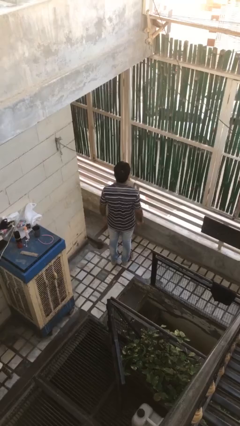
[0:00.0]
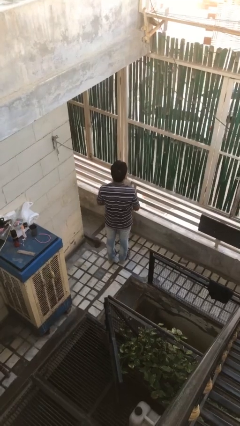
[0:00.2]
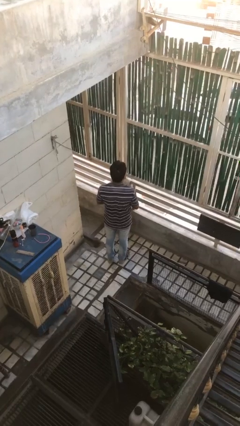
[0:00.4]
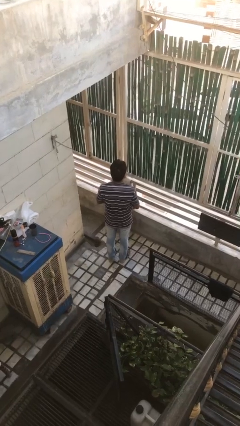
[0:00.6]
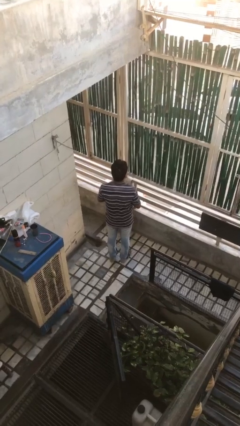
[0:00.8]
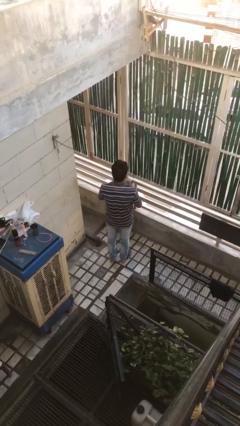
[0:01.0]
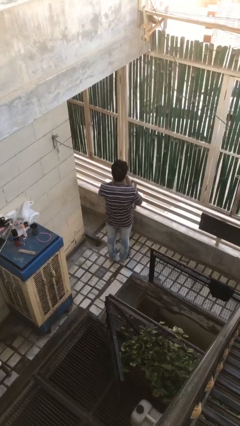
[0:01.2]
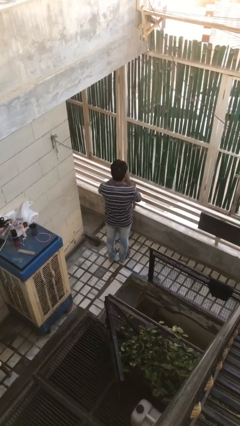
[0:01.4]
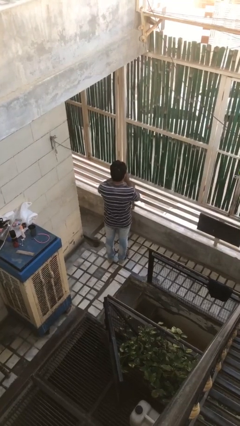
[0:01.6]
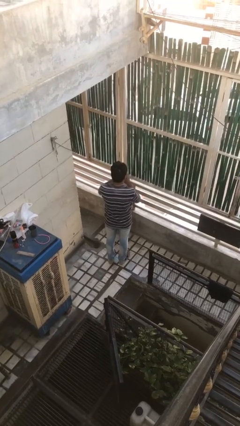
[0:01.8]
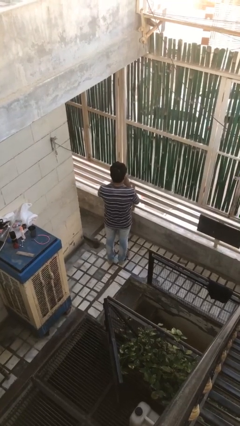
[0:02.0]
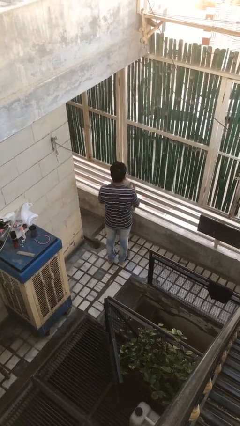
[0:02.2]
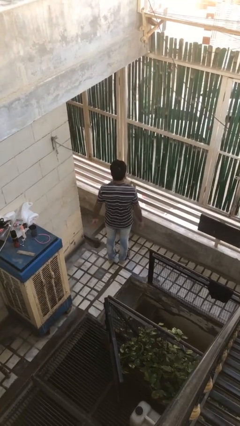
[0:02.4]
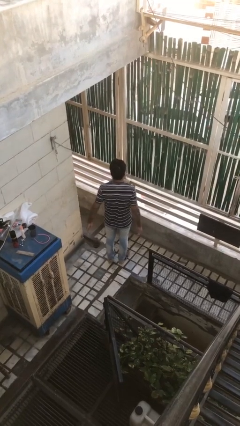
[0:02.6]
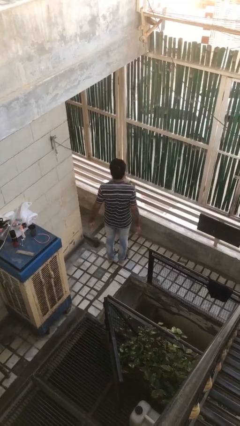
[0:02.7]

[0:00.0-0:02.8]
person puts on ring

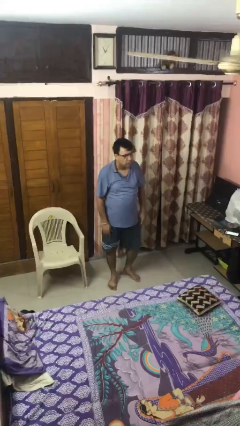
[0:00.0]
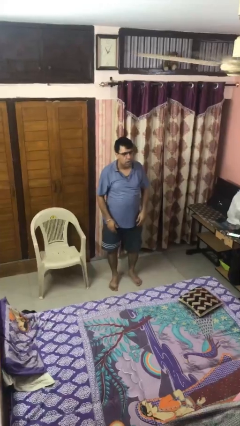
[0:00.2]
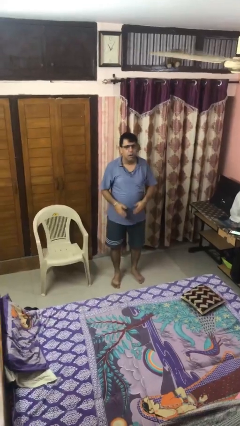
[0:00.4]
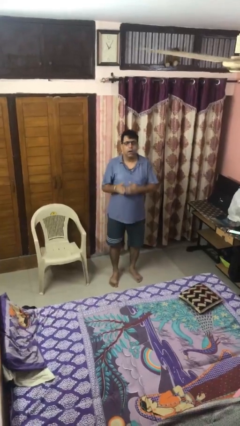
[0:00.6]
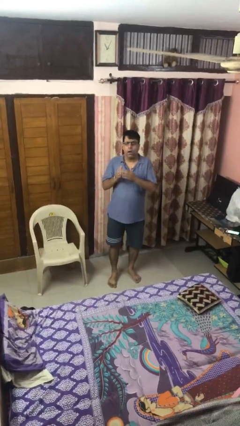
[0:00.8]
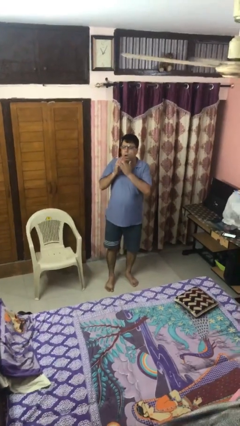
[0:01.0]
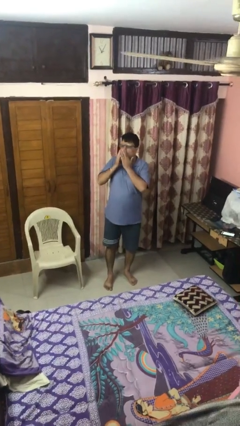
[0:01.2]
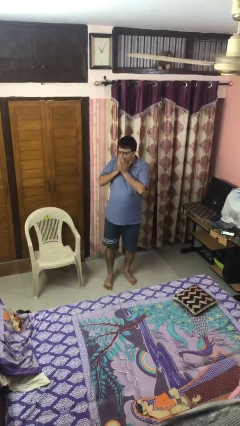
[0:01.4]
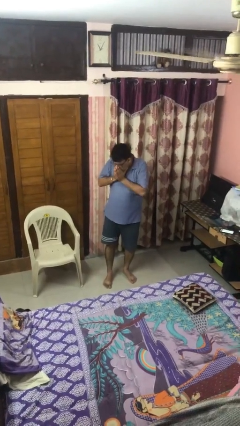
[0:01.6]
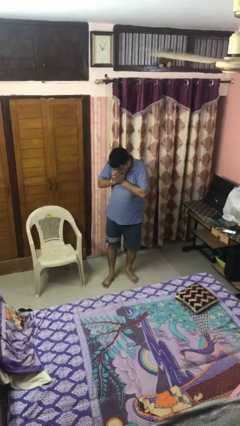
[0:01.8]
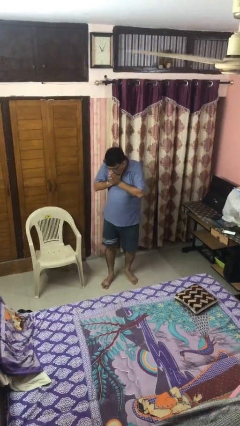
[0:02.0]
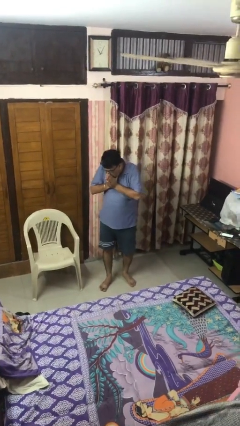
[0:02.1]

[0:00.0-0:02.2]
person sneezes into hand

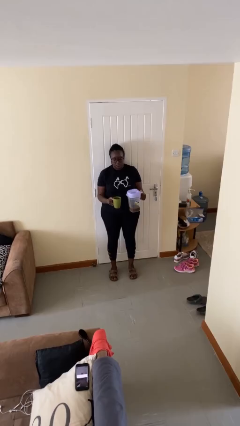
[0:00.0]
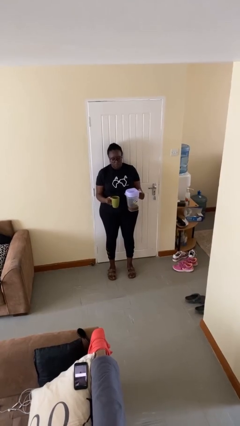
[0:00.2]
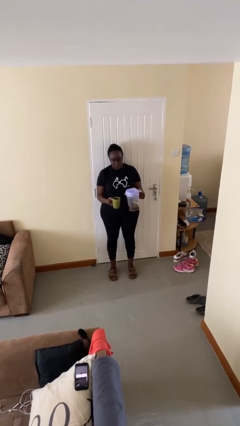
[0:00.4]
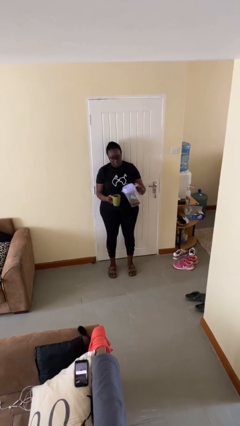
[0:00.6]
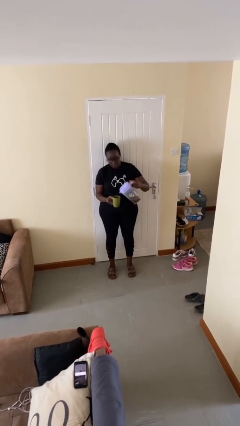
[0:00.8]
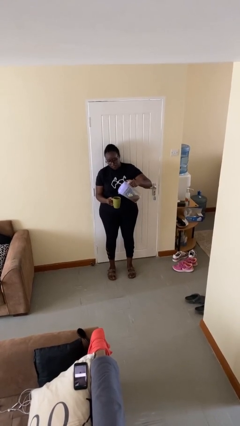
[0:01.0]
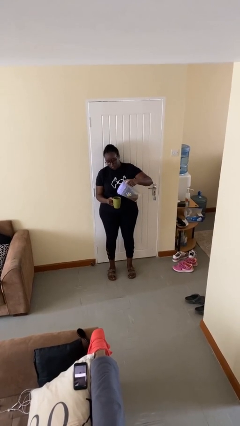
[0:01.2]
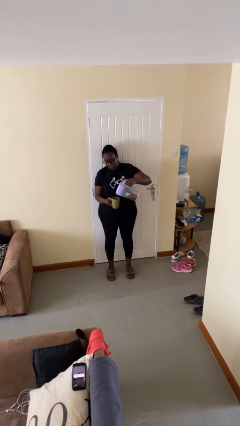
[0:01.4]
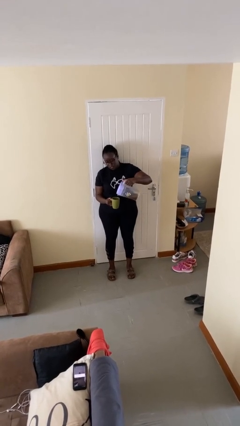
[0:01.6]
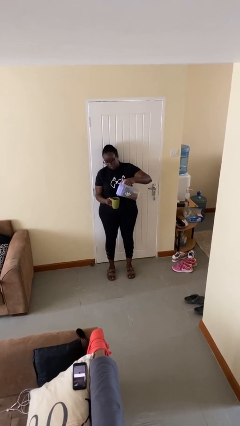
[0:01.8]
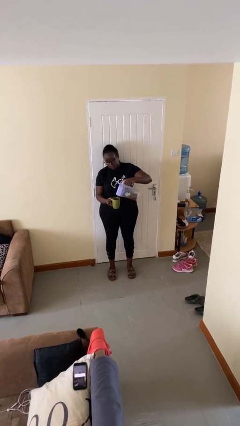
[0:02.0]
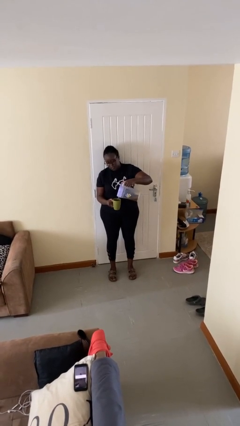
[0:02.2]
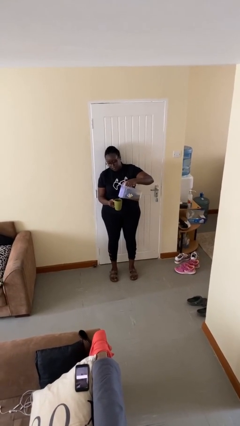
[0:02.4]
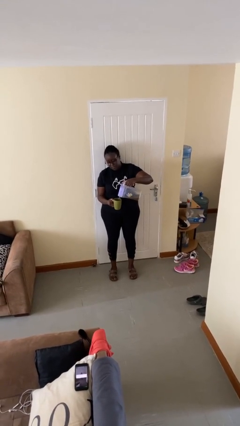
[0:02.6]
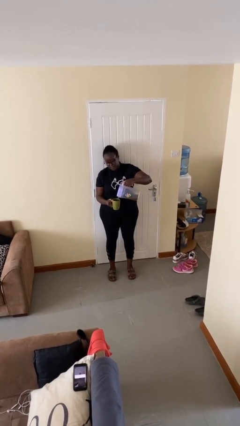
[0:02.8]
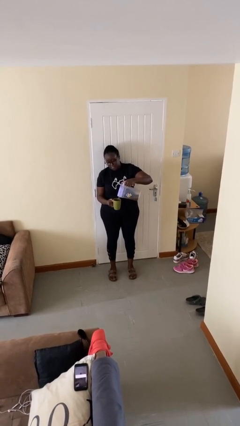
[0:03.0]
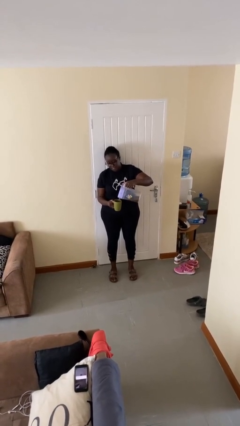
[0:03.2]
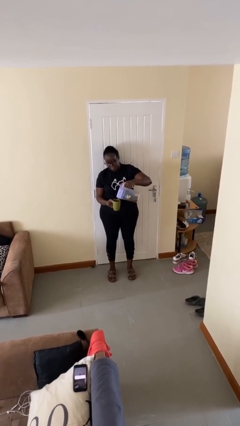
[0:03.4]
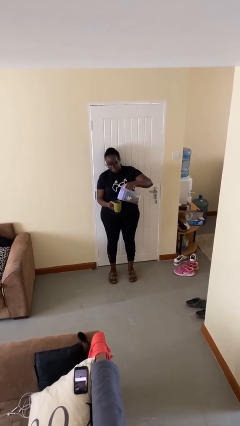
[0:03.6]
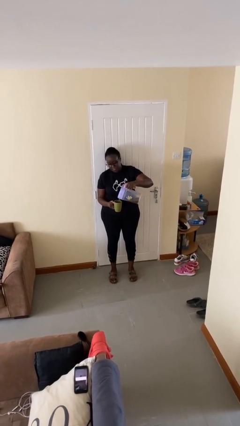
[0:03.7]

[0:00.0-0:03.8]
person pours coffee into mug

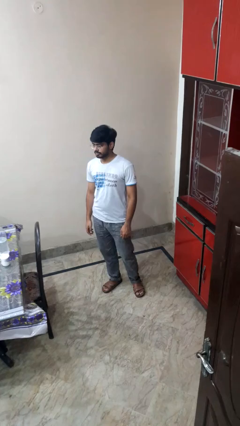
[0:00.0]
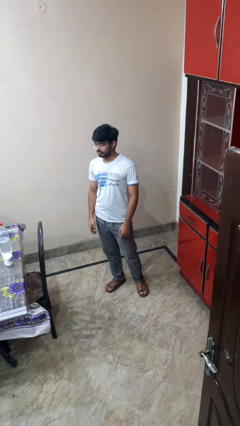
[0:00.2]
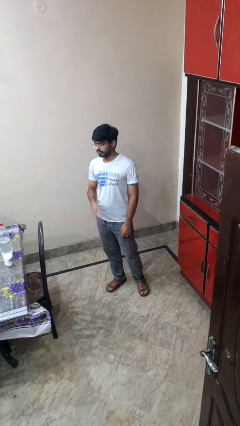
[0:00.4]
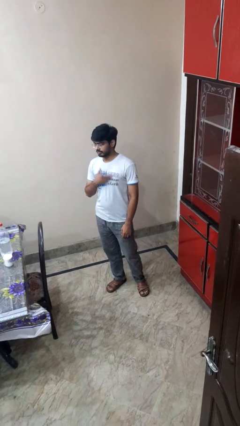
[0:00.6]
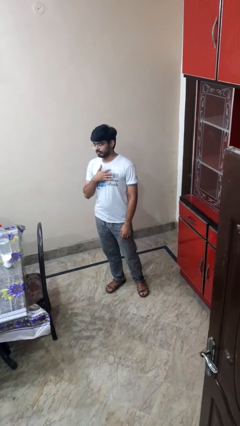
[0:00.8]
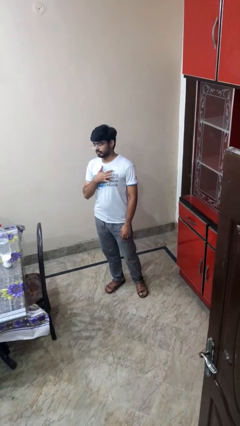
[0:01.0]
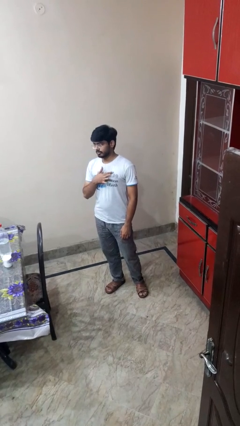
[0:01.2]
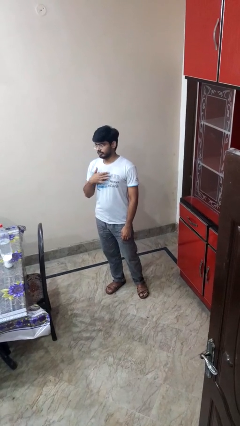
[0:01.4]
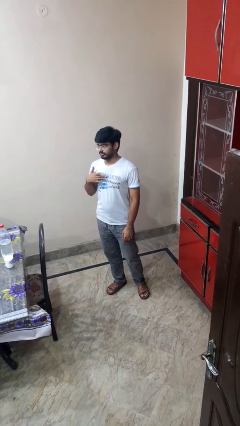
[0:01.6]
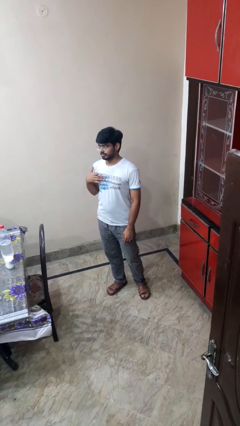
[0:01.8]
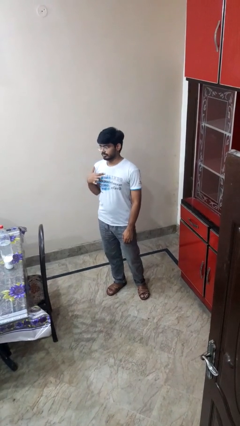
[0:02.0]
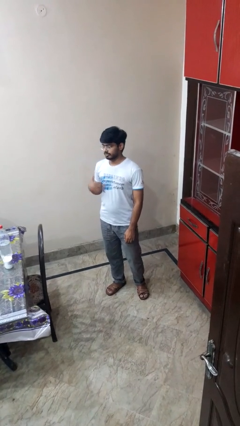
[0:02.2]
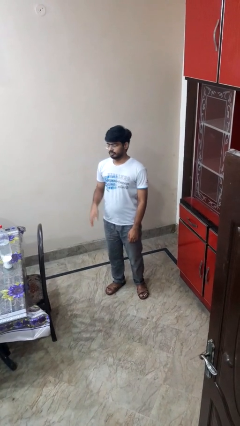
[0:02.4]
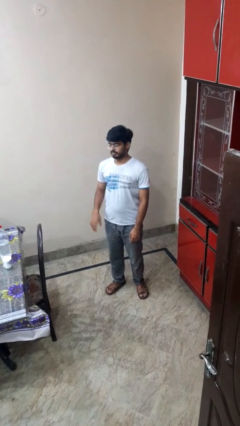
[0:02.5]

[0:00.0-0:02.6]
person drums on chest

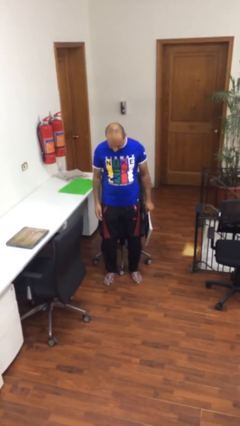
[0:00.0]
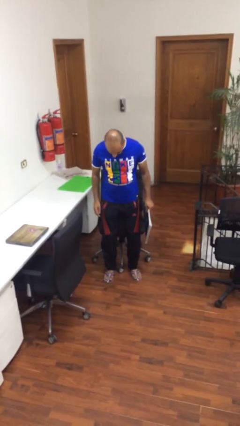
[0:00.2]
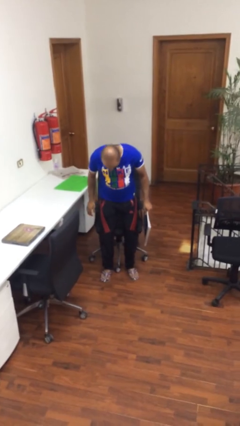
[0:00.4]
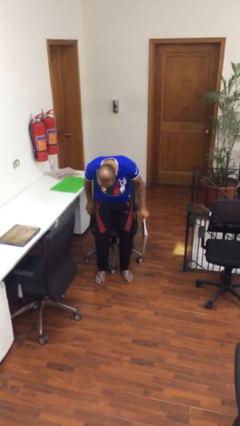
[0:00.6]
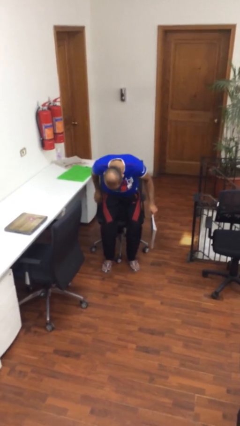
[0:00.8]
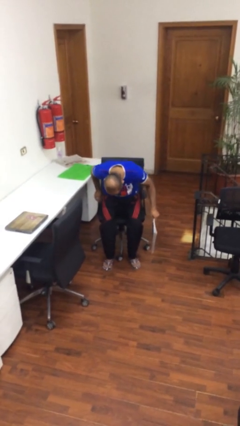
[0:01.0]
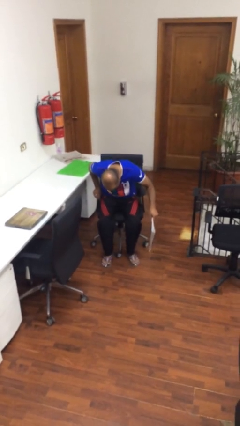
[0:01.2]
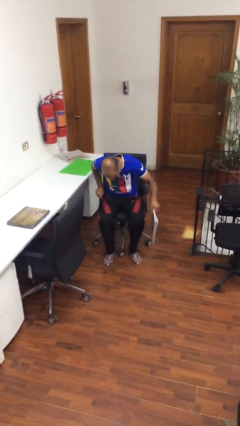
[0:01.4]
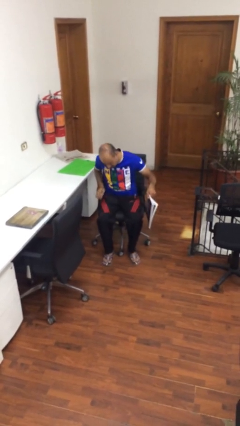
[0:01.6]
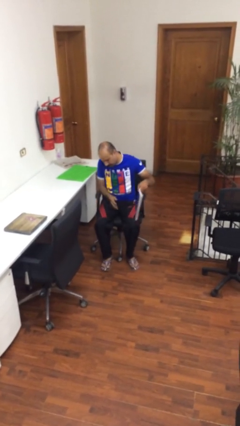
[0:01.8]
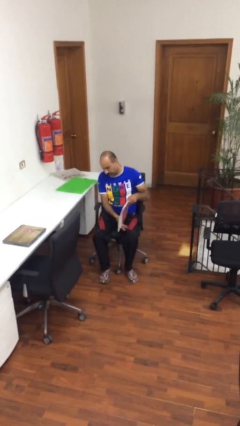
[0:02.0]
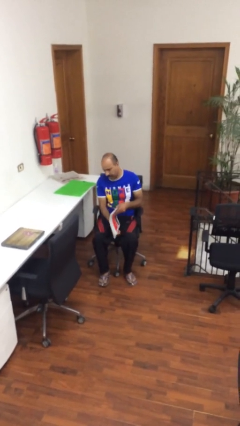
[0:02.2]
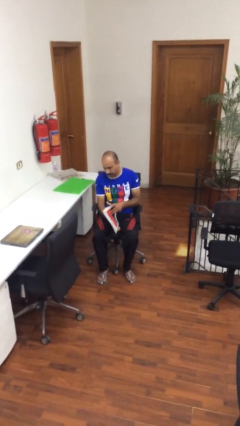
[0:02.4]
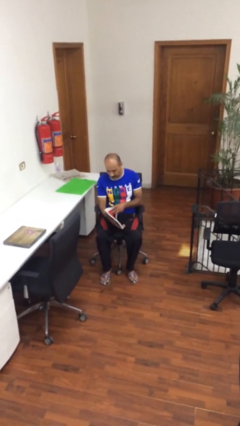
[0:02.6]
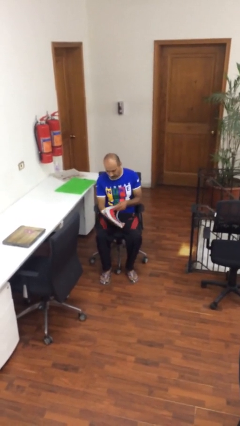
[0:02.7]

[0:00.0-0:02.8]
person sits down

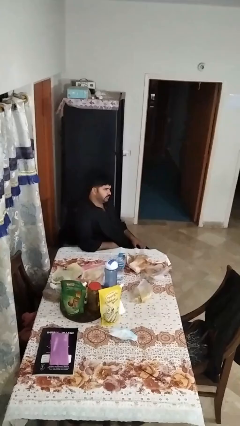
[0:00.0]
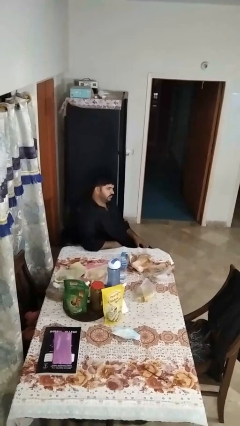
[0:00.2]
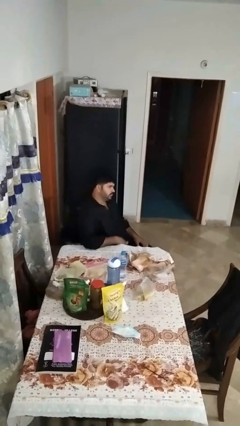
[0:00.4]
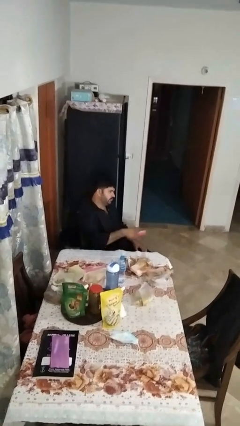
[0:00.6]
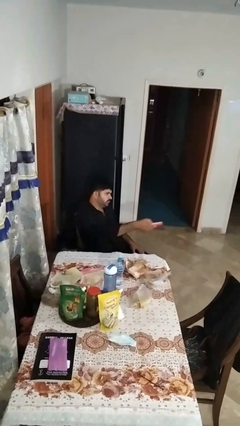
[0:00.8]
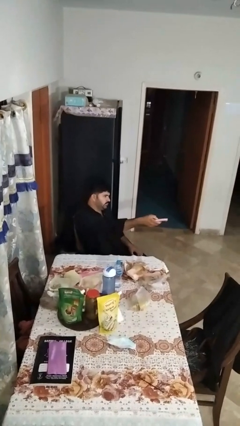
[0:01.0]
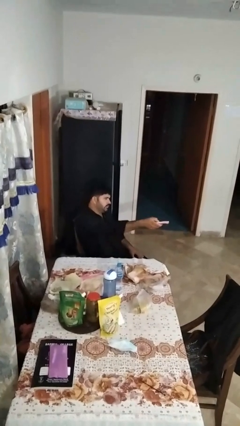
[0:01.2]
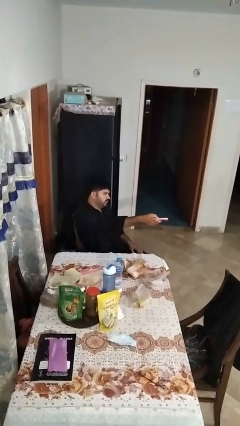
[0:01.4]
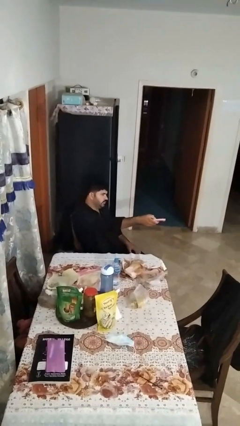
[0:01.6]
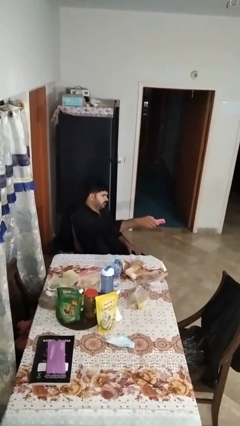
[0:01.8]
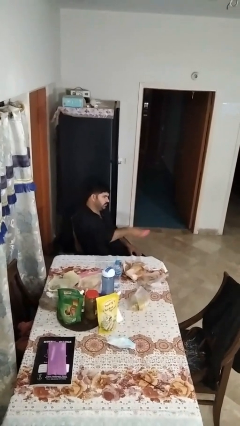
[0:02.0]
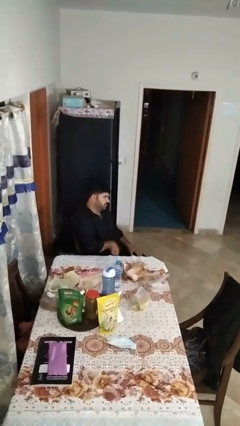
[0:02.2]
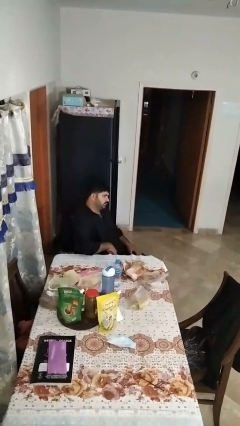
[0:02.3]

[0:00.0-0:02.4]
person uses television remote

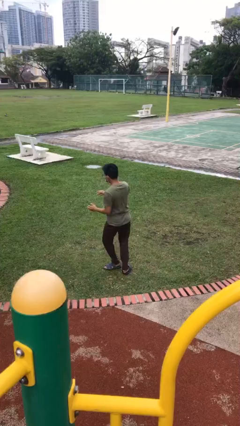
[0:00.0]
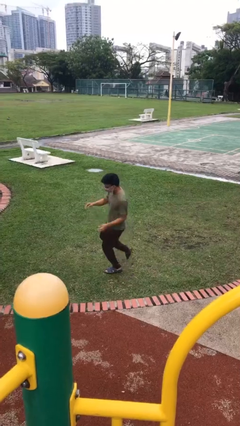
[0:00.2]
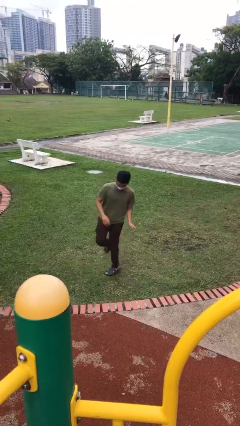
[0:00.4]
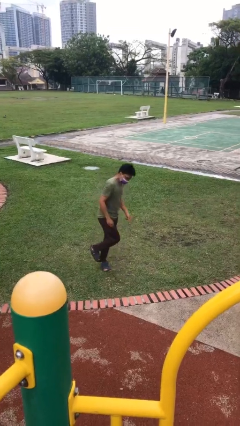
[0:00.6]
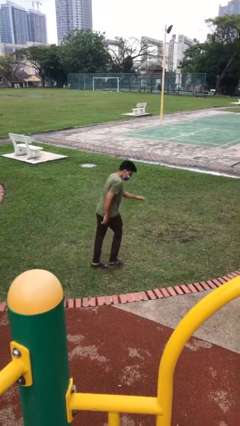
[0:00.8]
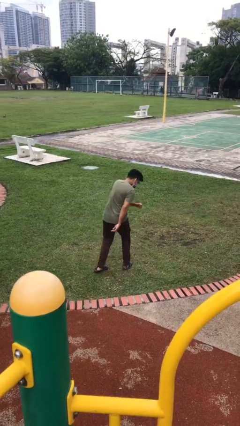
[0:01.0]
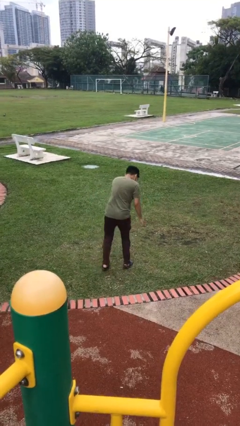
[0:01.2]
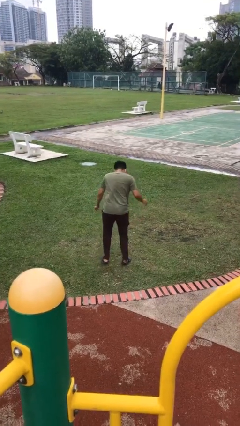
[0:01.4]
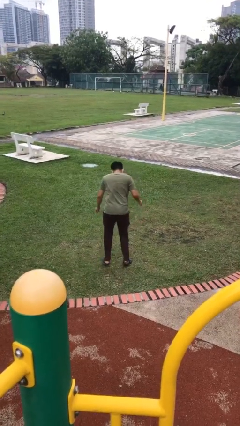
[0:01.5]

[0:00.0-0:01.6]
person twirls
